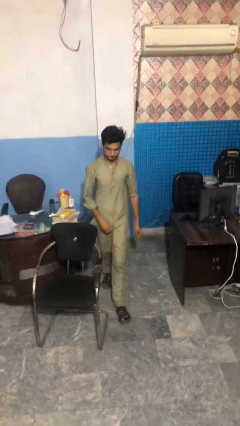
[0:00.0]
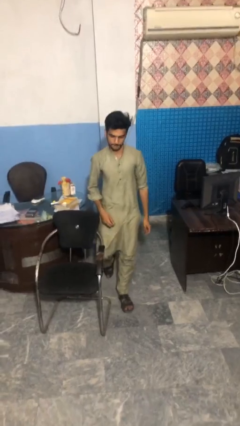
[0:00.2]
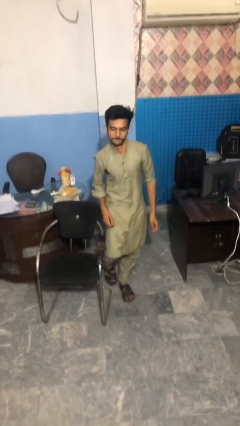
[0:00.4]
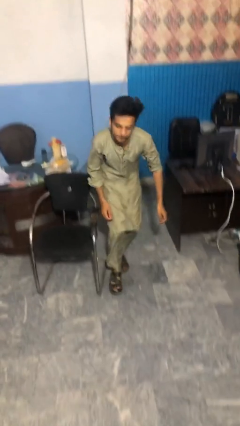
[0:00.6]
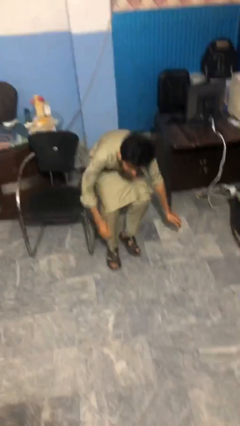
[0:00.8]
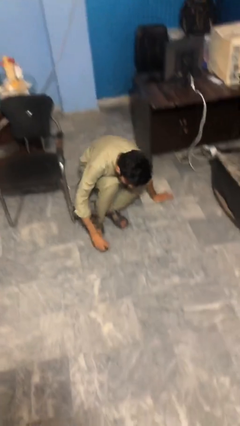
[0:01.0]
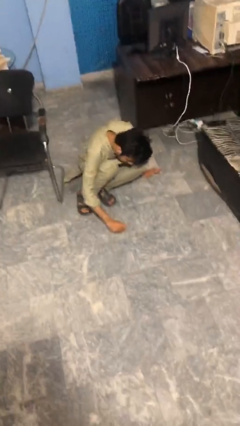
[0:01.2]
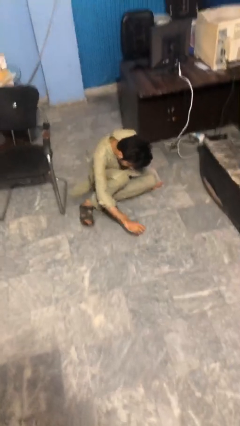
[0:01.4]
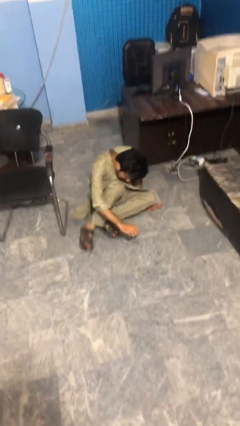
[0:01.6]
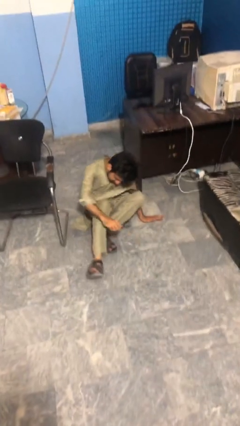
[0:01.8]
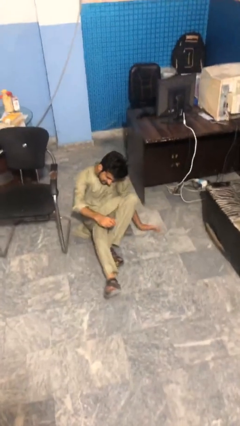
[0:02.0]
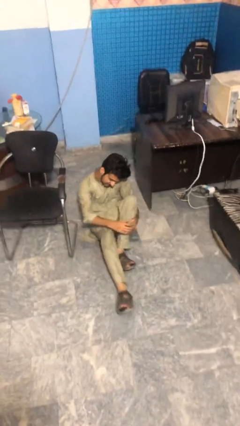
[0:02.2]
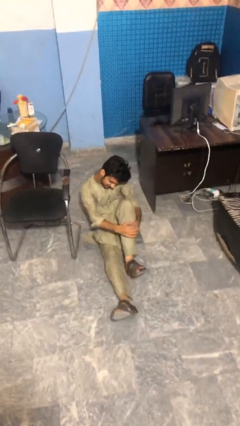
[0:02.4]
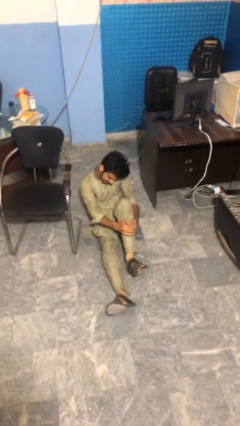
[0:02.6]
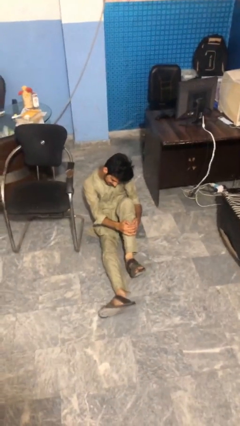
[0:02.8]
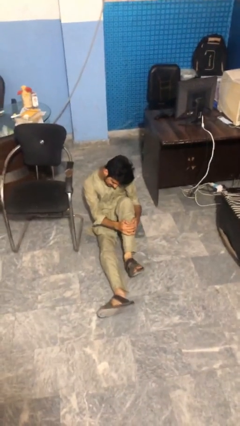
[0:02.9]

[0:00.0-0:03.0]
person trips on object on floor

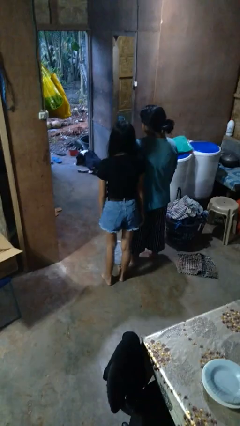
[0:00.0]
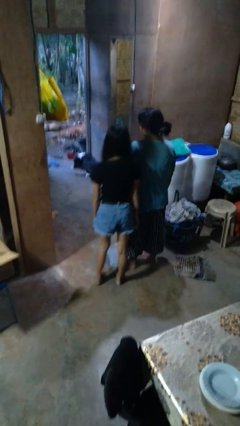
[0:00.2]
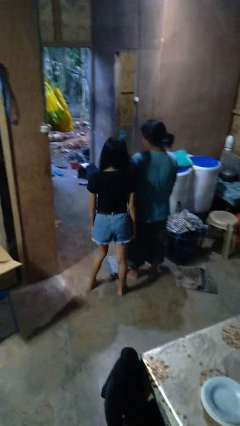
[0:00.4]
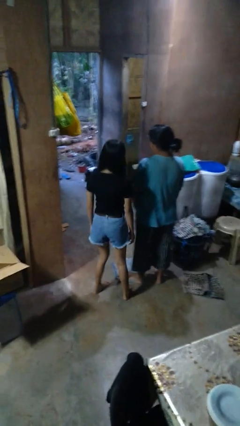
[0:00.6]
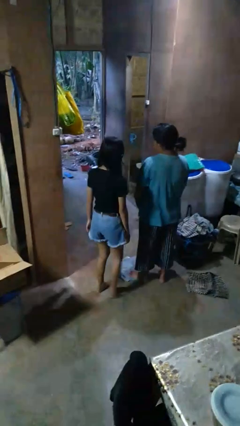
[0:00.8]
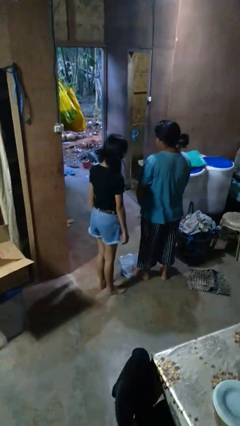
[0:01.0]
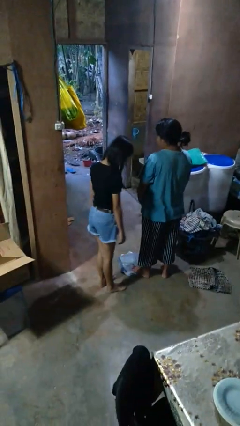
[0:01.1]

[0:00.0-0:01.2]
person bumps into person

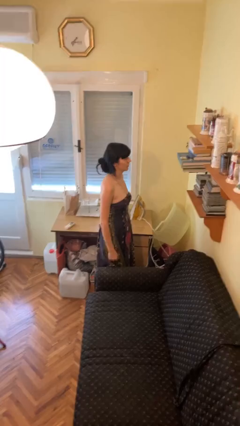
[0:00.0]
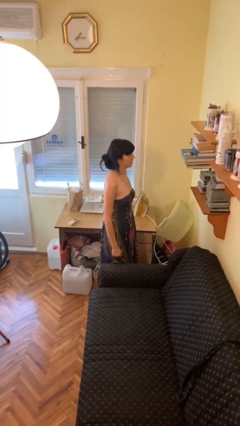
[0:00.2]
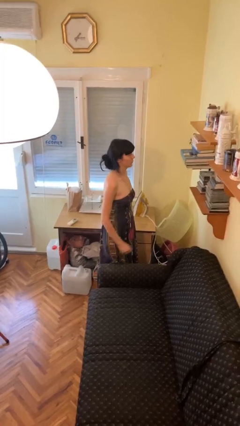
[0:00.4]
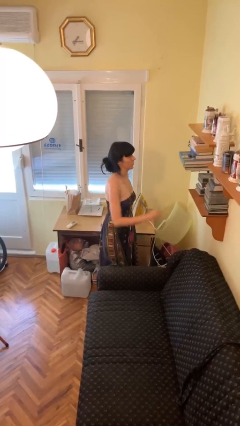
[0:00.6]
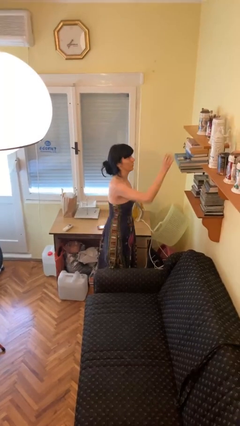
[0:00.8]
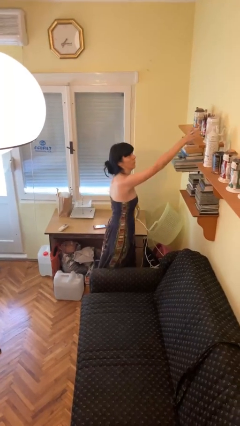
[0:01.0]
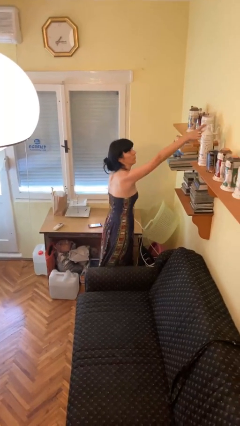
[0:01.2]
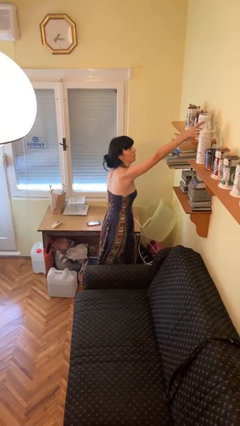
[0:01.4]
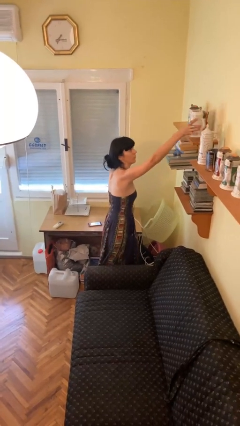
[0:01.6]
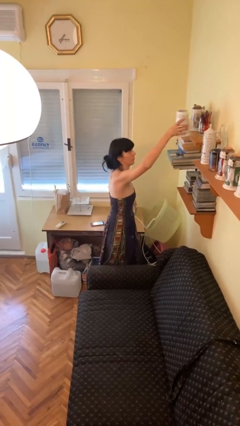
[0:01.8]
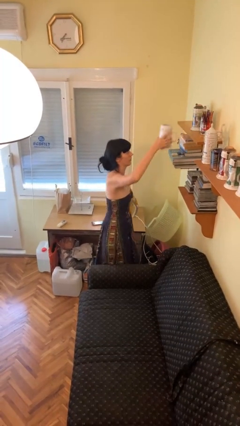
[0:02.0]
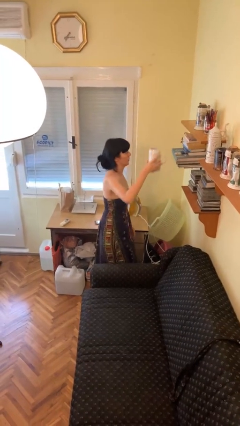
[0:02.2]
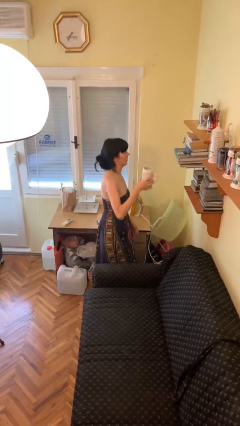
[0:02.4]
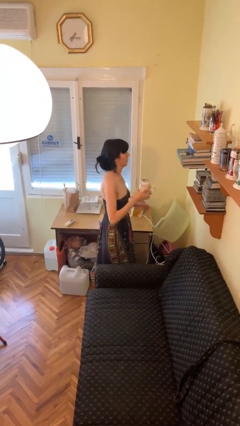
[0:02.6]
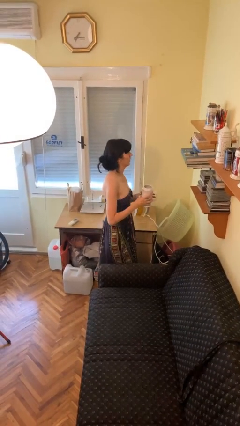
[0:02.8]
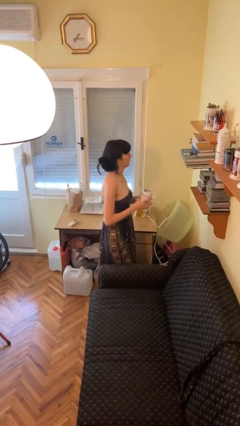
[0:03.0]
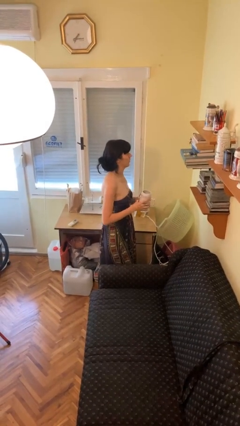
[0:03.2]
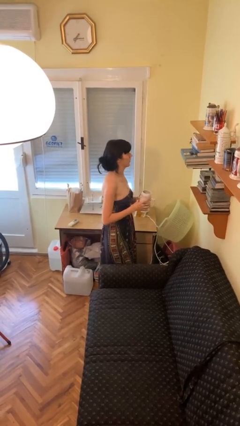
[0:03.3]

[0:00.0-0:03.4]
person picks up object from shelf

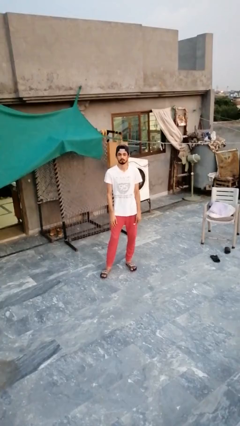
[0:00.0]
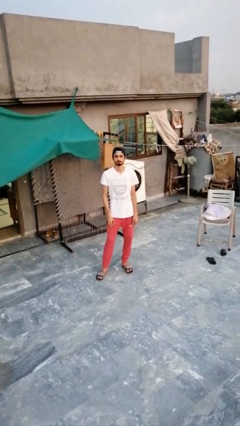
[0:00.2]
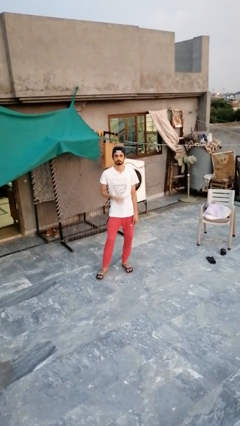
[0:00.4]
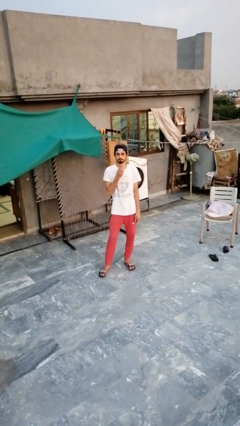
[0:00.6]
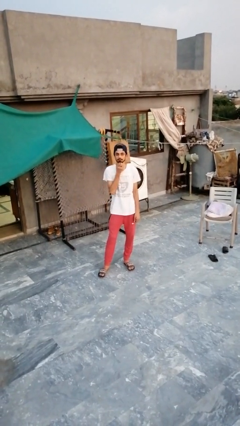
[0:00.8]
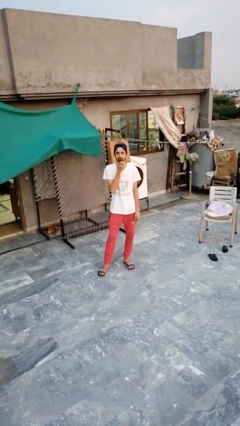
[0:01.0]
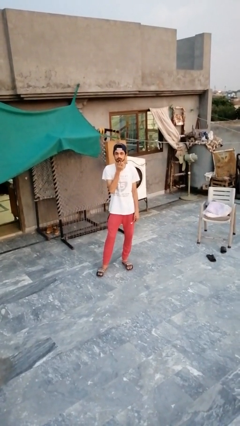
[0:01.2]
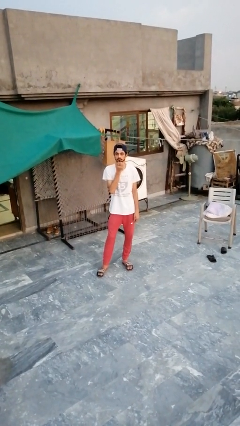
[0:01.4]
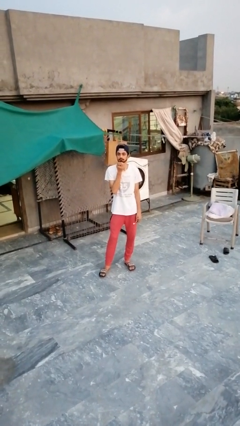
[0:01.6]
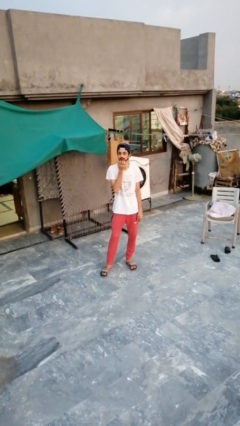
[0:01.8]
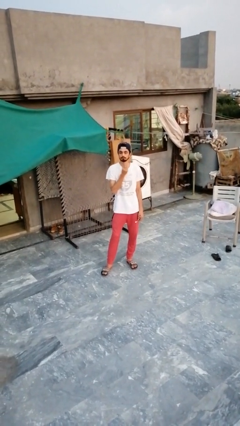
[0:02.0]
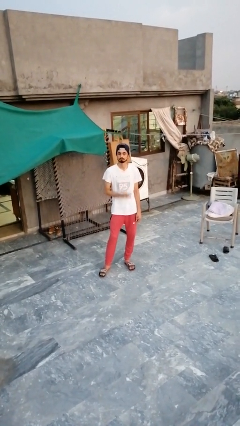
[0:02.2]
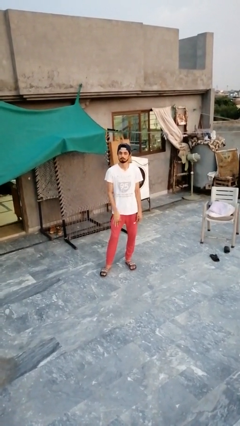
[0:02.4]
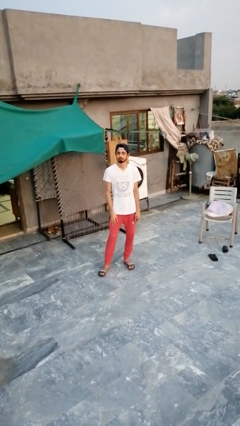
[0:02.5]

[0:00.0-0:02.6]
person strokes chin

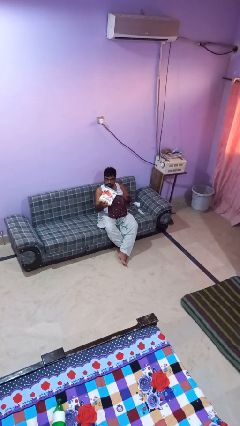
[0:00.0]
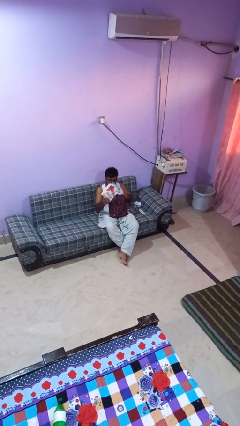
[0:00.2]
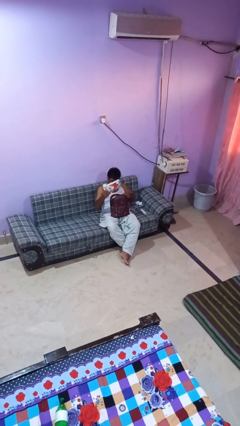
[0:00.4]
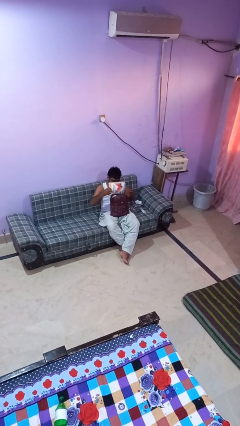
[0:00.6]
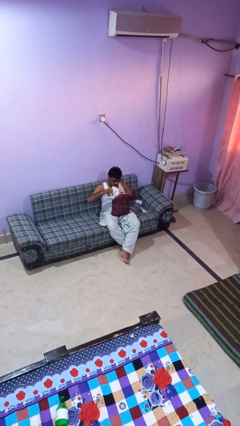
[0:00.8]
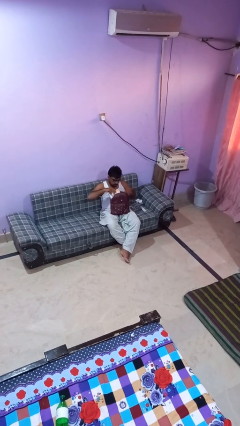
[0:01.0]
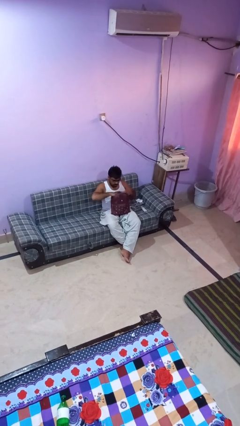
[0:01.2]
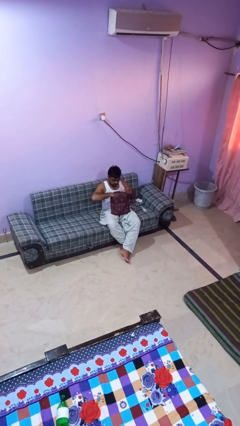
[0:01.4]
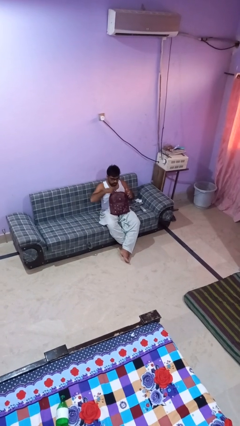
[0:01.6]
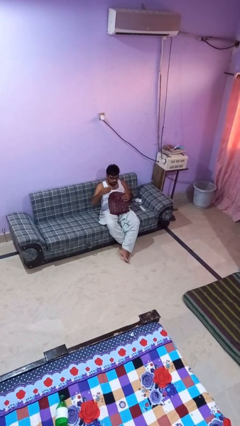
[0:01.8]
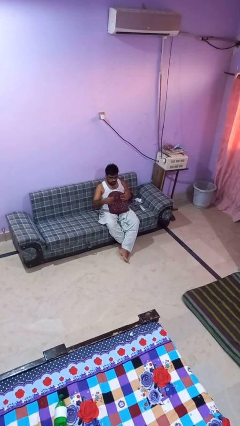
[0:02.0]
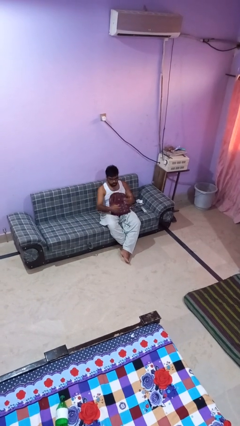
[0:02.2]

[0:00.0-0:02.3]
person puts object into backpack

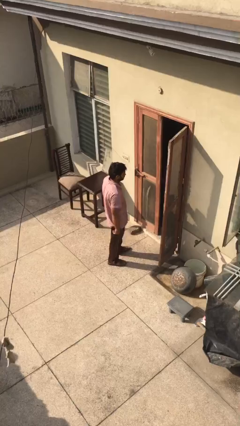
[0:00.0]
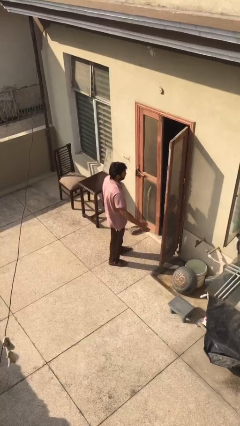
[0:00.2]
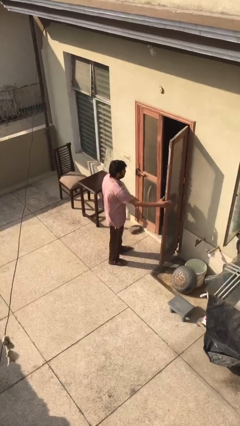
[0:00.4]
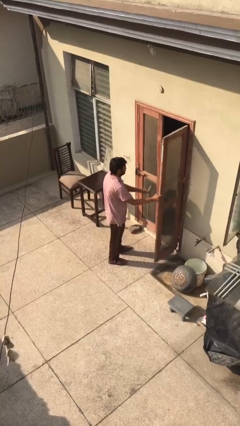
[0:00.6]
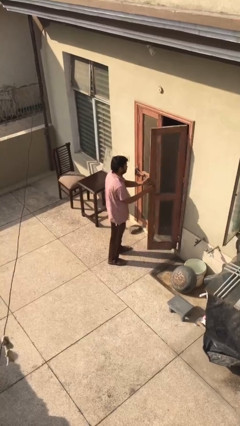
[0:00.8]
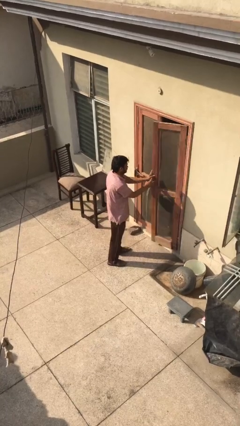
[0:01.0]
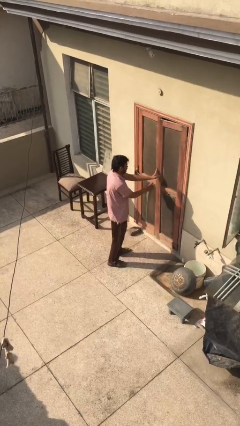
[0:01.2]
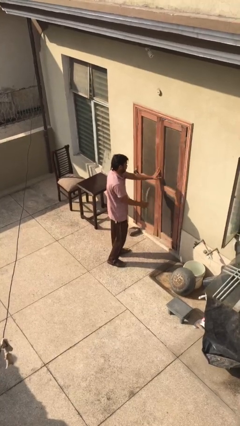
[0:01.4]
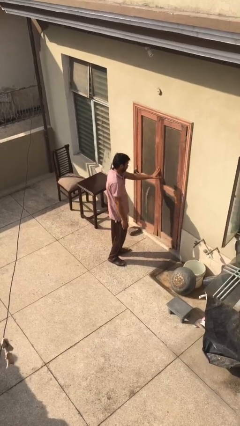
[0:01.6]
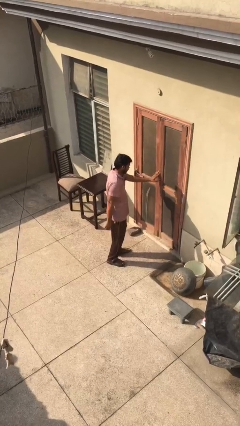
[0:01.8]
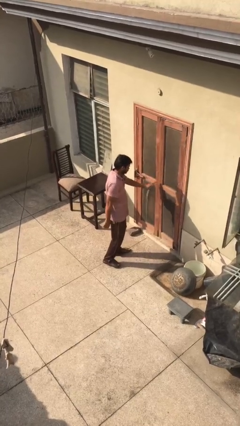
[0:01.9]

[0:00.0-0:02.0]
person closes facility door

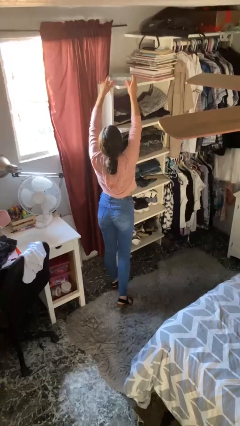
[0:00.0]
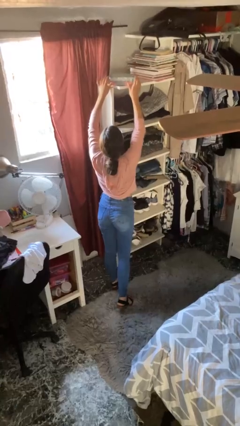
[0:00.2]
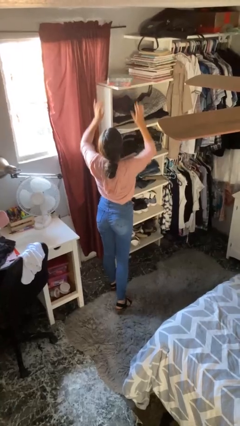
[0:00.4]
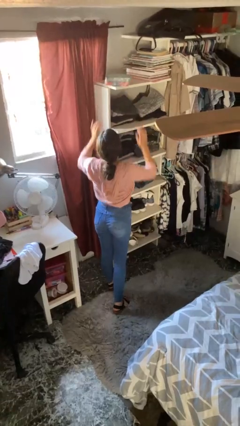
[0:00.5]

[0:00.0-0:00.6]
person puts down object on shelf

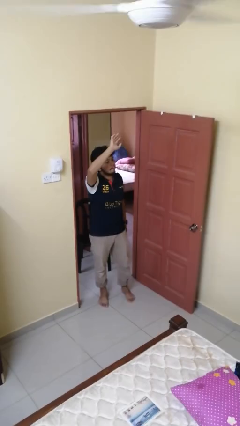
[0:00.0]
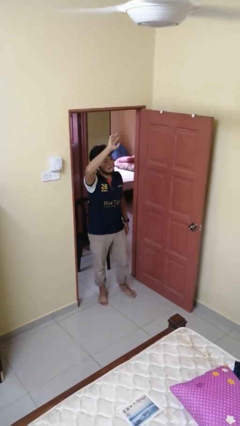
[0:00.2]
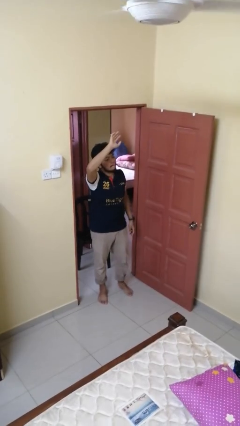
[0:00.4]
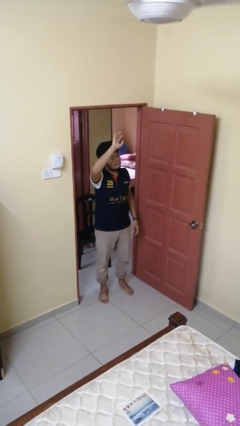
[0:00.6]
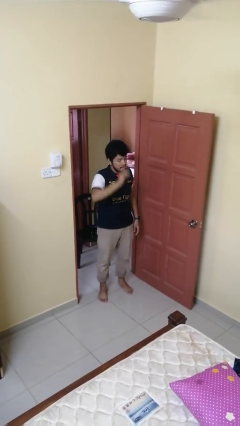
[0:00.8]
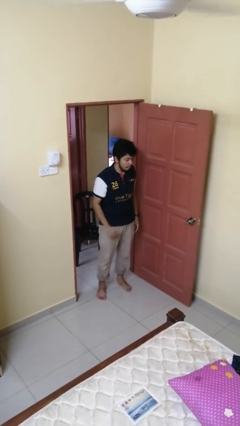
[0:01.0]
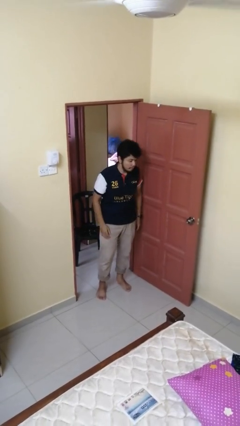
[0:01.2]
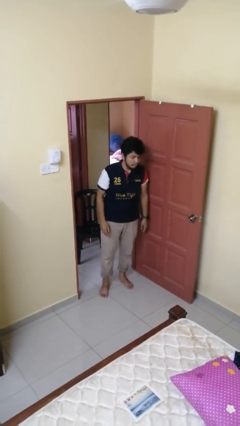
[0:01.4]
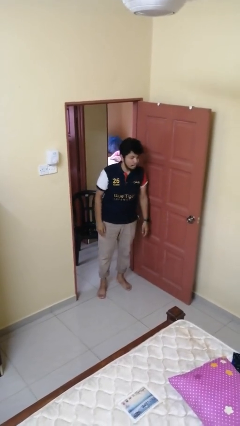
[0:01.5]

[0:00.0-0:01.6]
person gestures lower hand

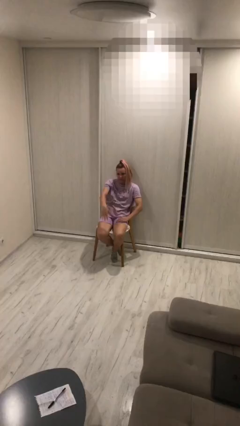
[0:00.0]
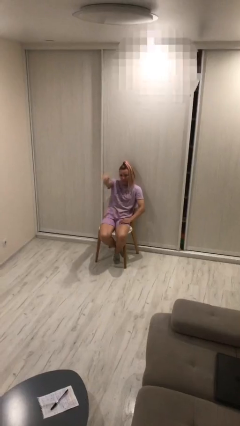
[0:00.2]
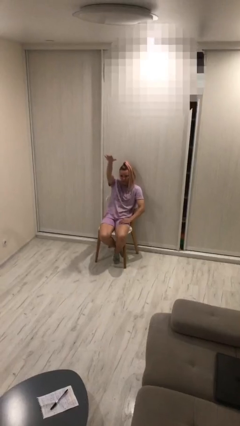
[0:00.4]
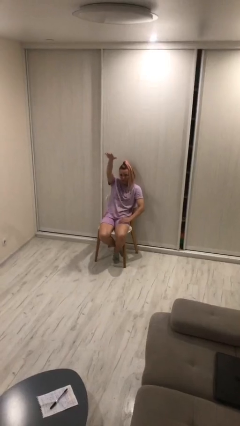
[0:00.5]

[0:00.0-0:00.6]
person gestures swipe up
